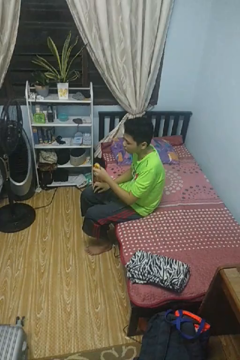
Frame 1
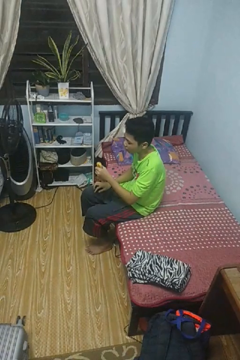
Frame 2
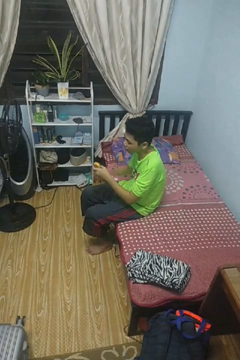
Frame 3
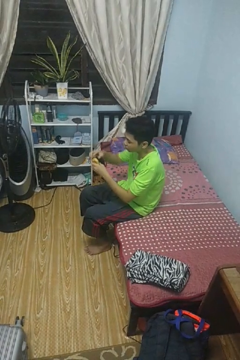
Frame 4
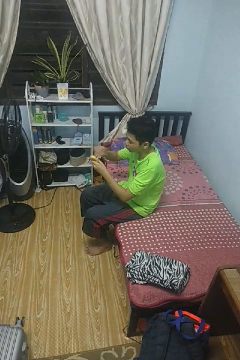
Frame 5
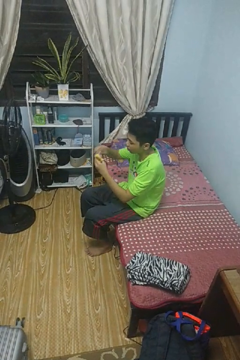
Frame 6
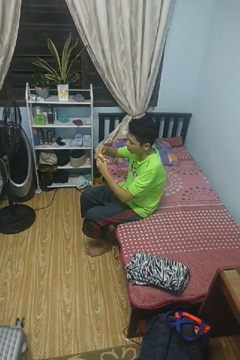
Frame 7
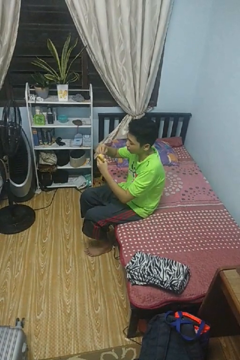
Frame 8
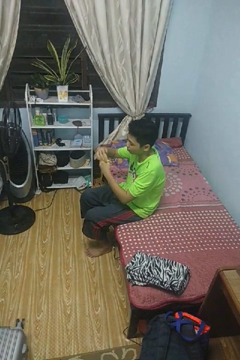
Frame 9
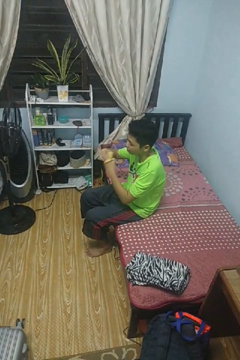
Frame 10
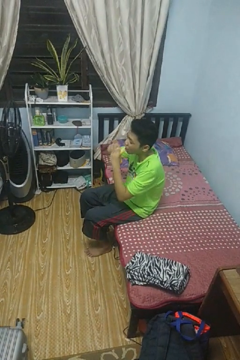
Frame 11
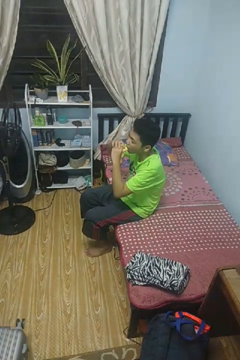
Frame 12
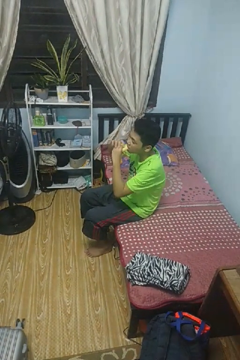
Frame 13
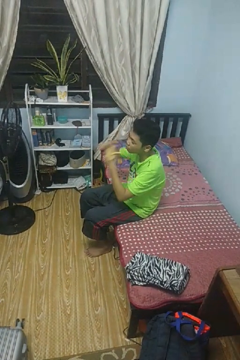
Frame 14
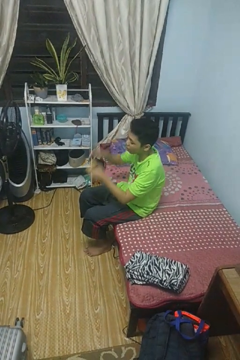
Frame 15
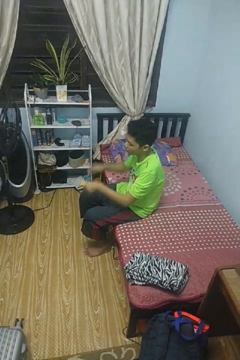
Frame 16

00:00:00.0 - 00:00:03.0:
person eats banana

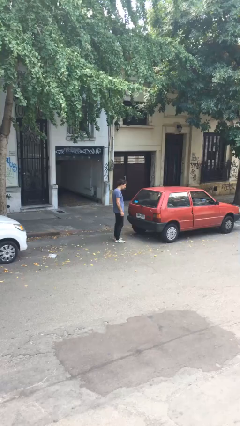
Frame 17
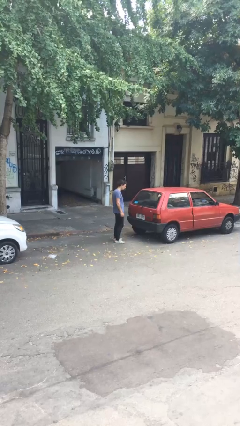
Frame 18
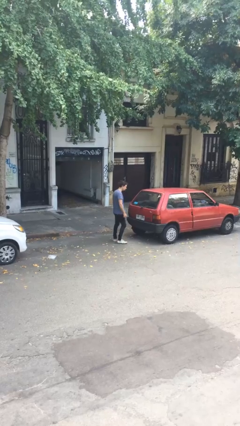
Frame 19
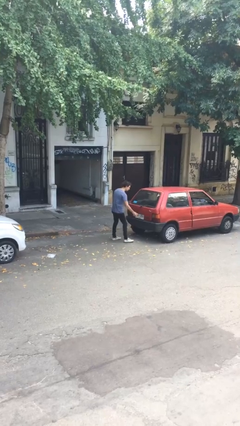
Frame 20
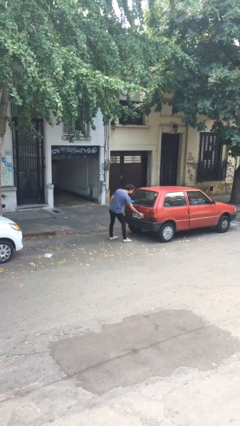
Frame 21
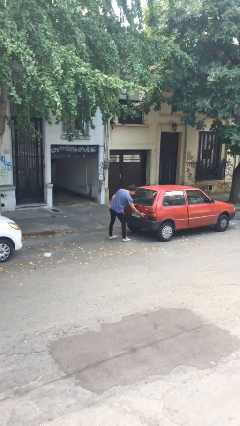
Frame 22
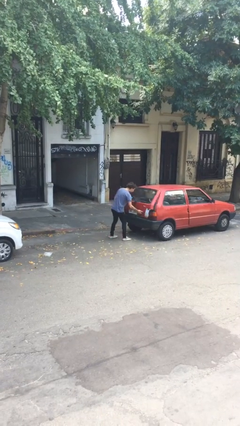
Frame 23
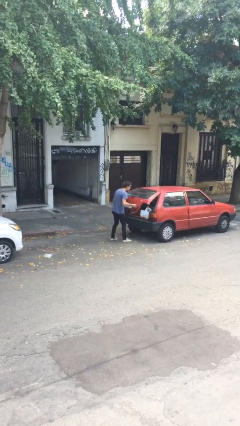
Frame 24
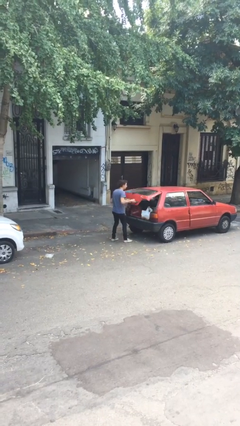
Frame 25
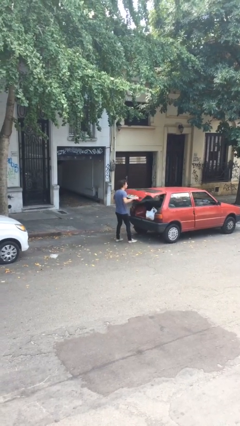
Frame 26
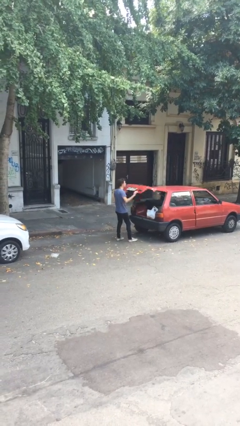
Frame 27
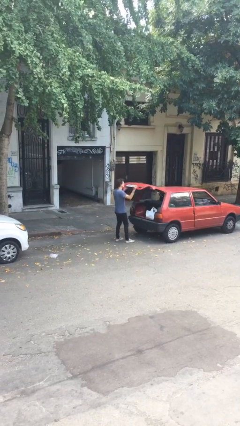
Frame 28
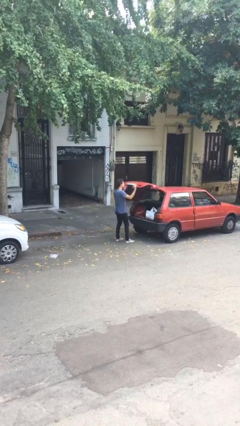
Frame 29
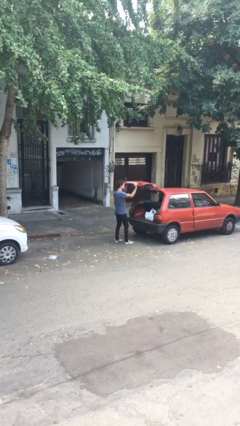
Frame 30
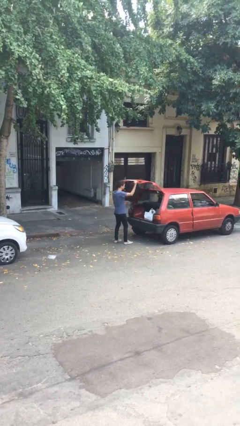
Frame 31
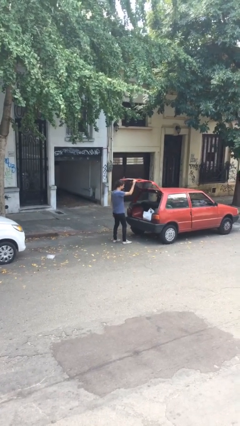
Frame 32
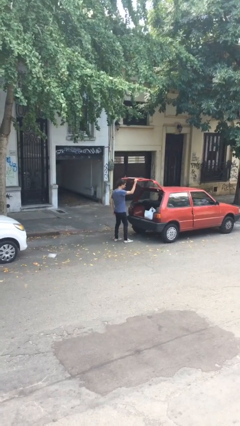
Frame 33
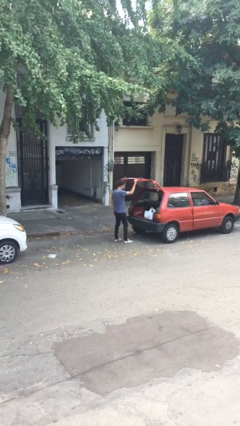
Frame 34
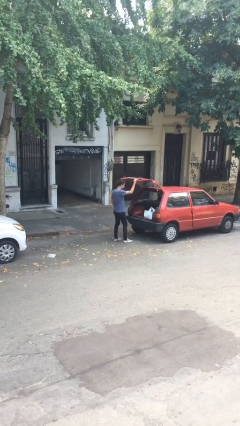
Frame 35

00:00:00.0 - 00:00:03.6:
person opens car trunk

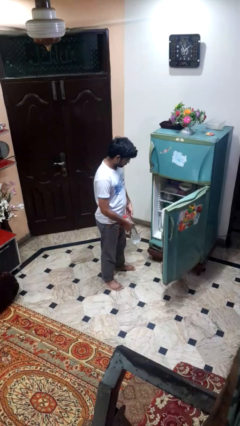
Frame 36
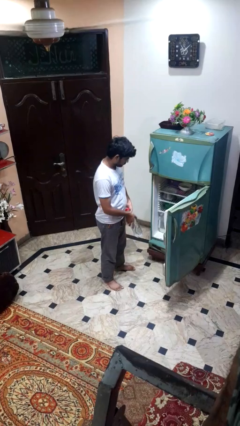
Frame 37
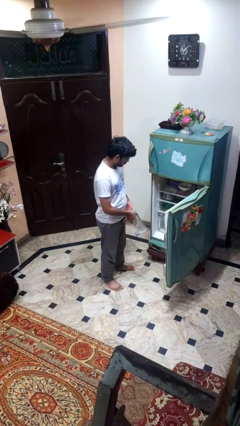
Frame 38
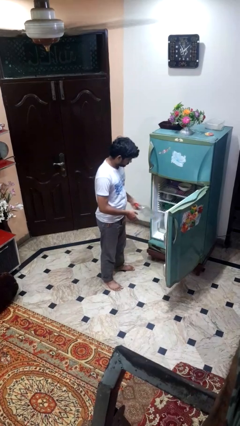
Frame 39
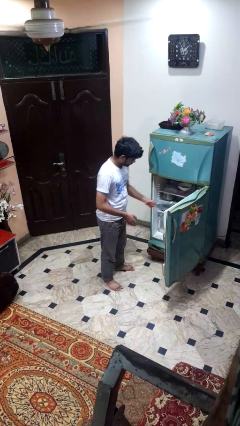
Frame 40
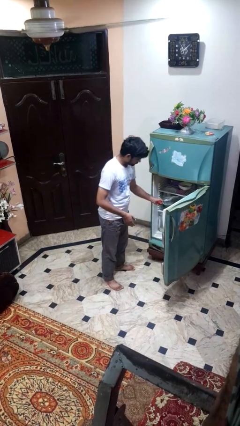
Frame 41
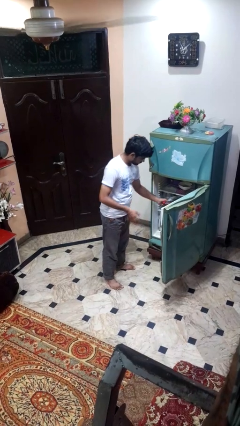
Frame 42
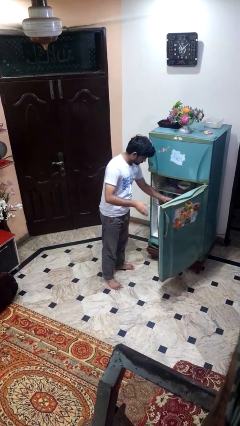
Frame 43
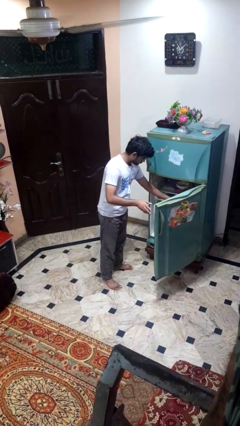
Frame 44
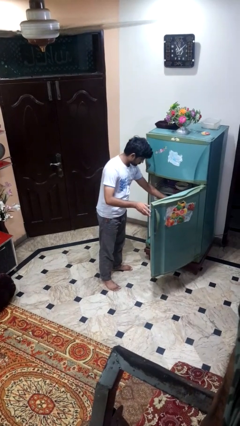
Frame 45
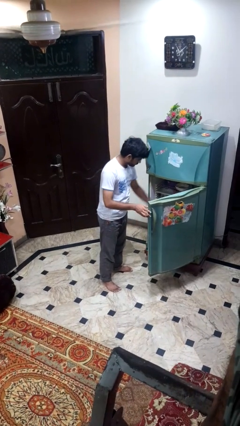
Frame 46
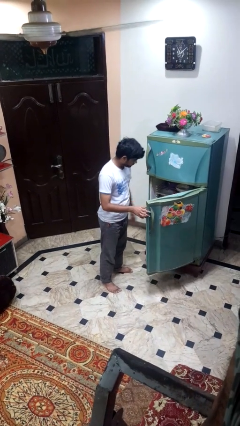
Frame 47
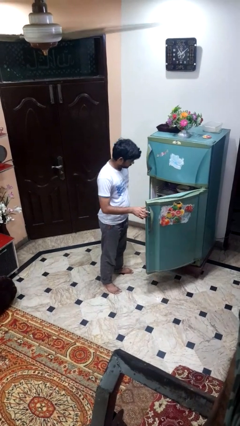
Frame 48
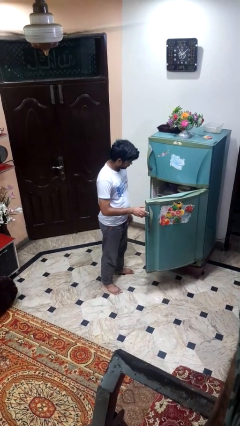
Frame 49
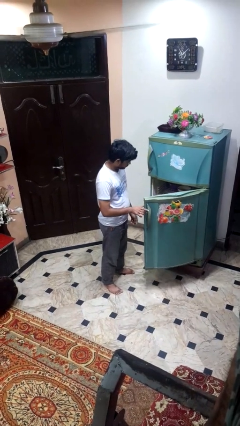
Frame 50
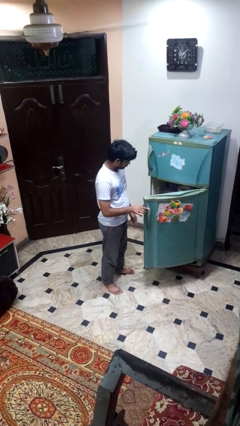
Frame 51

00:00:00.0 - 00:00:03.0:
person puts object into refrigerator

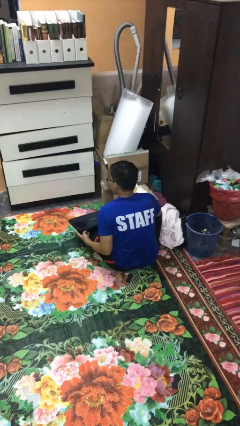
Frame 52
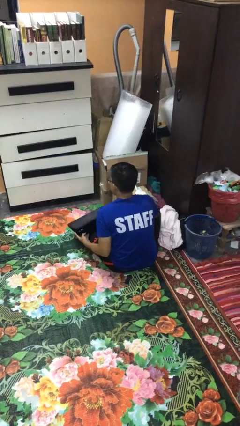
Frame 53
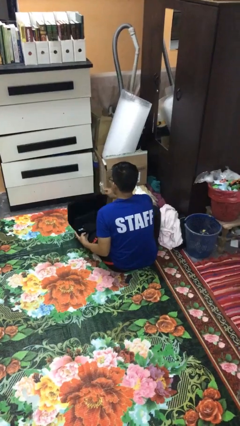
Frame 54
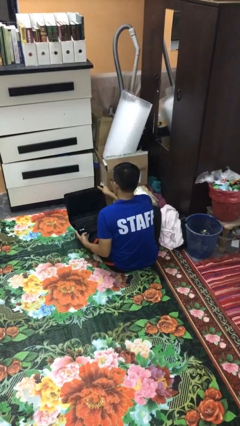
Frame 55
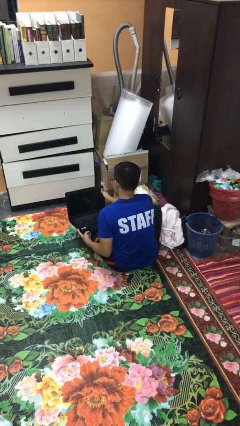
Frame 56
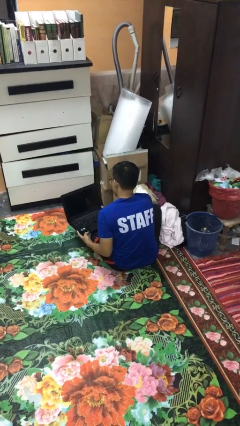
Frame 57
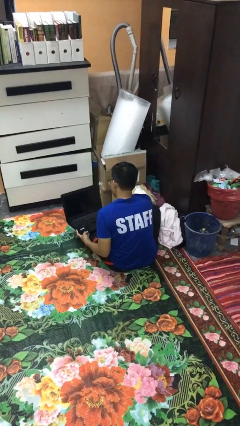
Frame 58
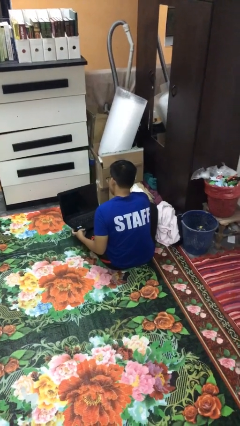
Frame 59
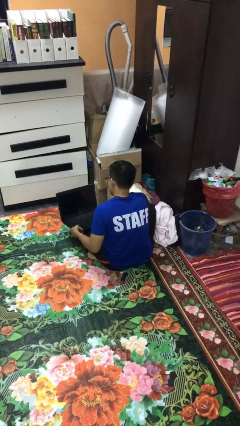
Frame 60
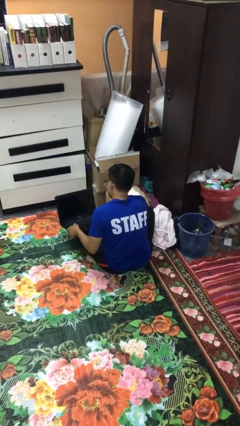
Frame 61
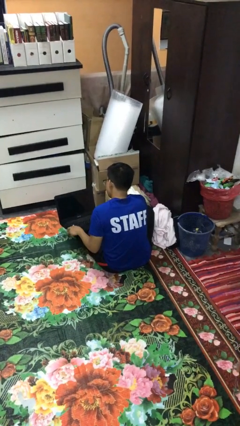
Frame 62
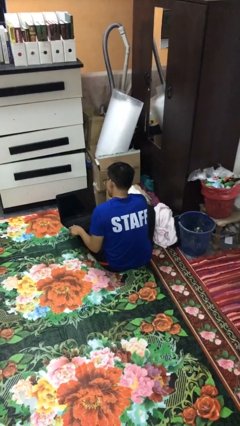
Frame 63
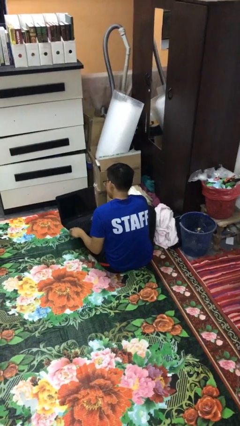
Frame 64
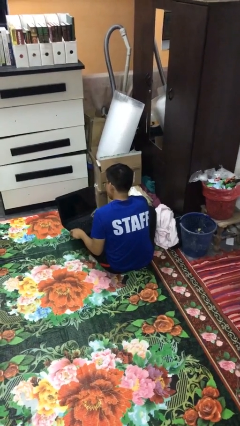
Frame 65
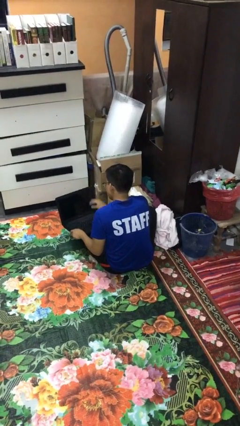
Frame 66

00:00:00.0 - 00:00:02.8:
person opens laptop

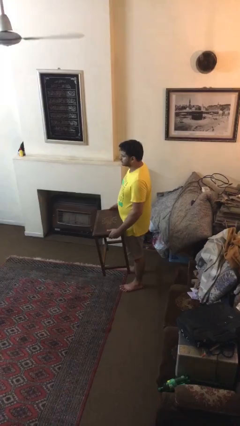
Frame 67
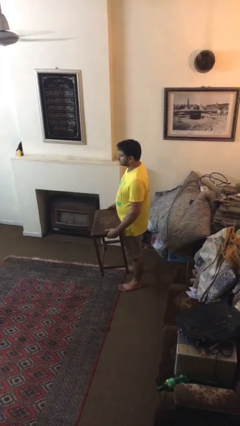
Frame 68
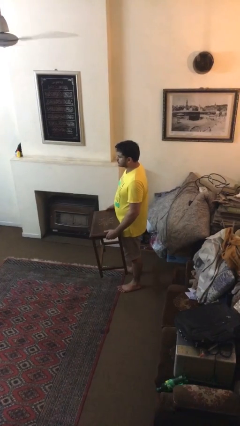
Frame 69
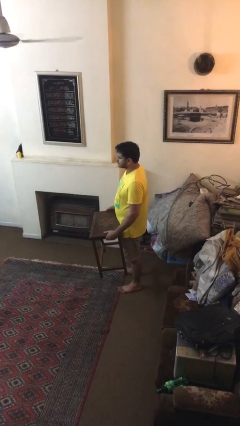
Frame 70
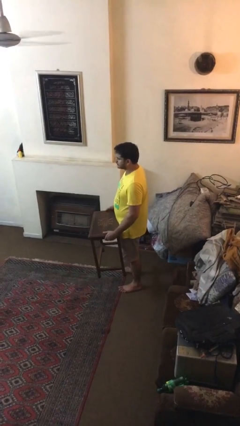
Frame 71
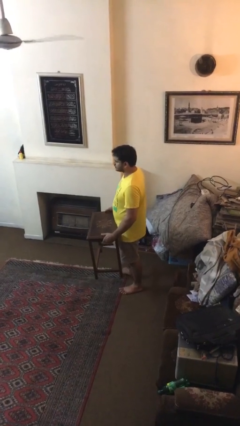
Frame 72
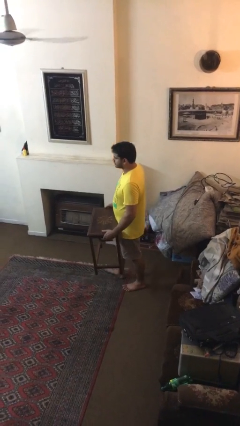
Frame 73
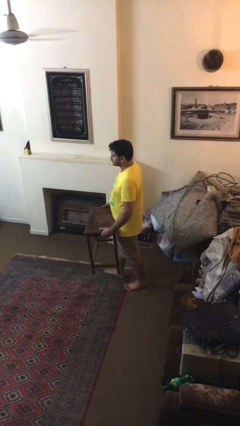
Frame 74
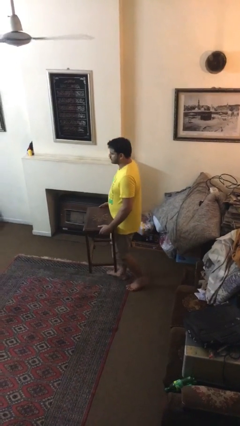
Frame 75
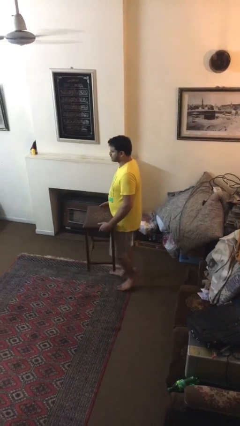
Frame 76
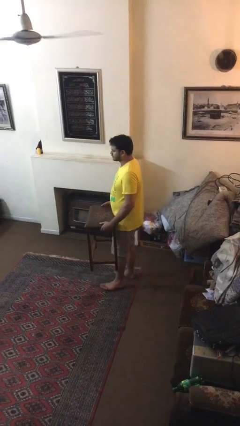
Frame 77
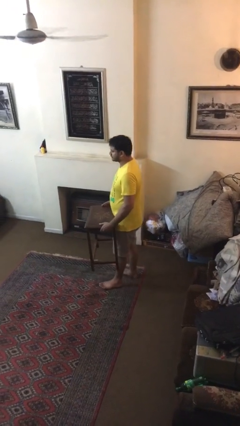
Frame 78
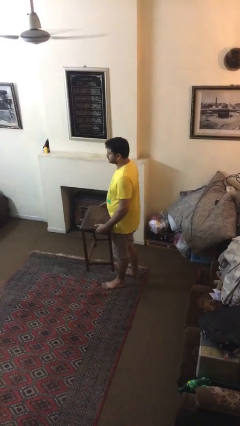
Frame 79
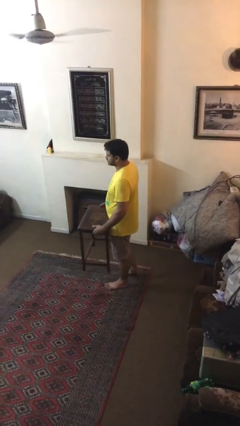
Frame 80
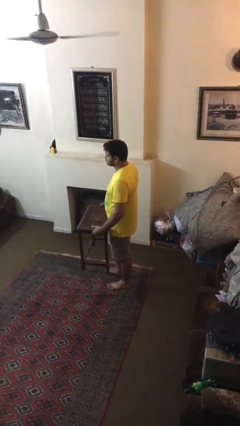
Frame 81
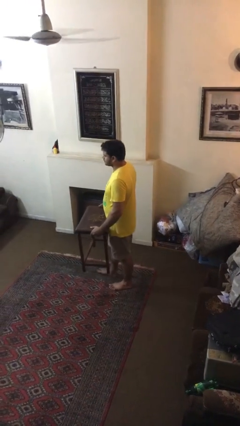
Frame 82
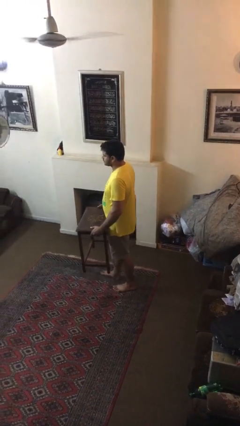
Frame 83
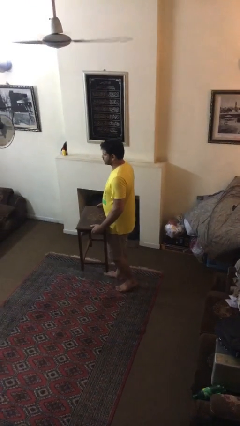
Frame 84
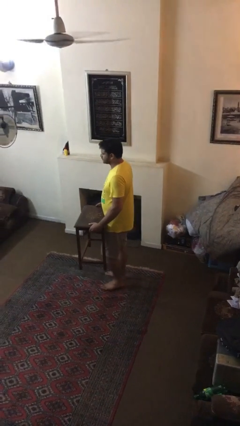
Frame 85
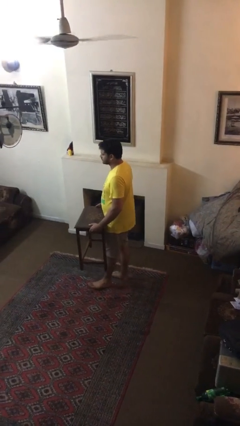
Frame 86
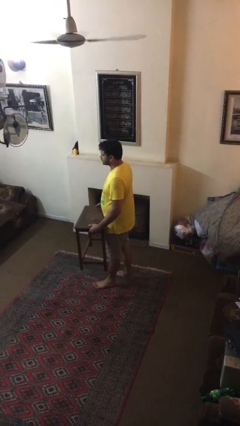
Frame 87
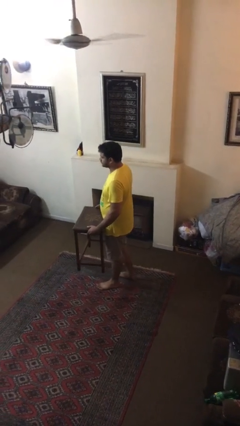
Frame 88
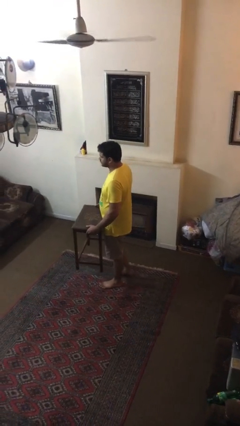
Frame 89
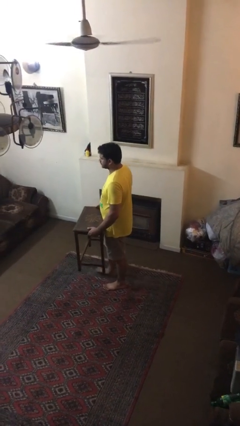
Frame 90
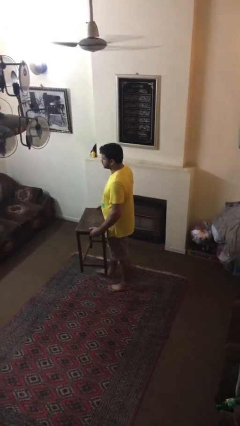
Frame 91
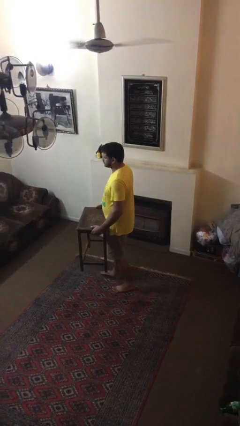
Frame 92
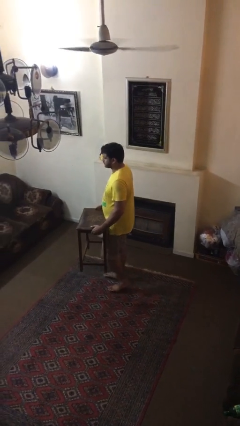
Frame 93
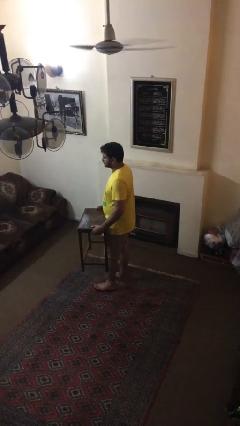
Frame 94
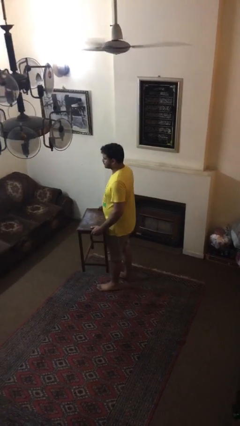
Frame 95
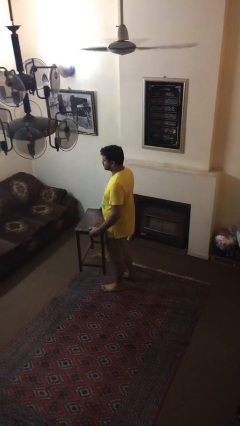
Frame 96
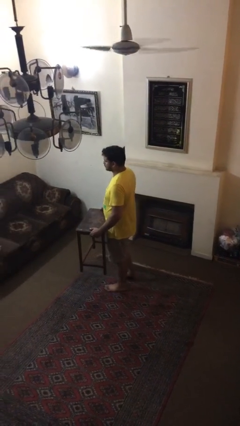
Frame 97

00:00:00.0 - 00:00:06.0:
person carries heavy object
